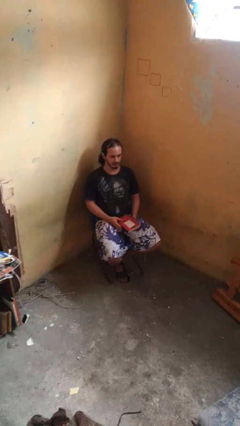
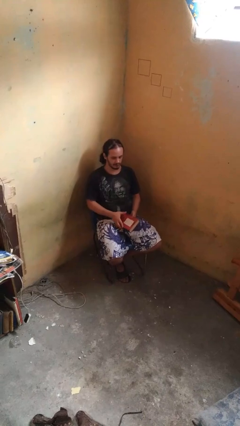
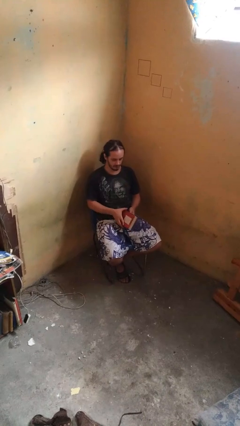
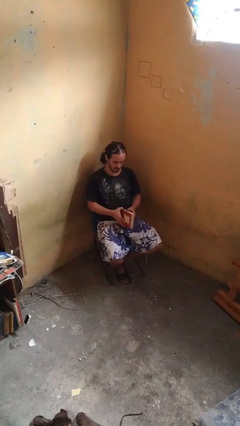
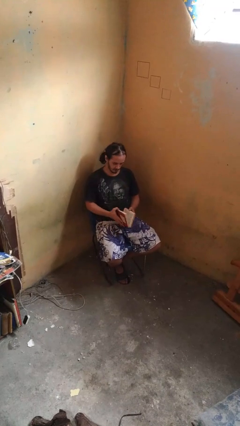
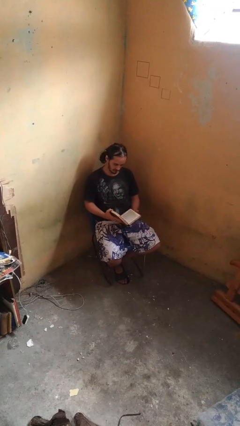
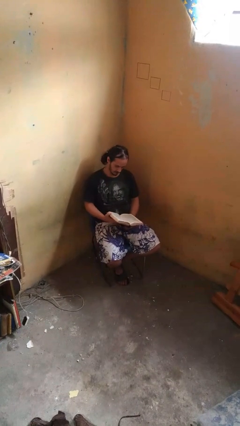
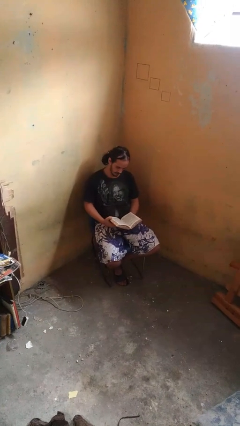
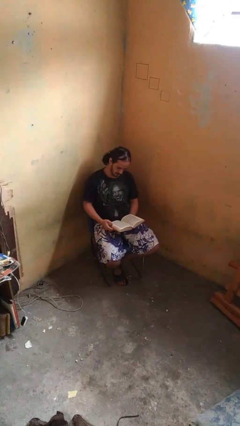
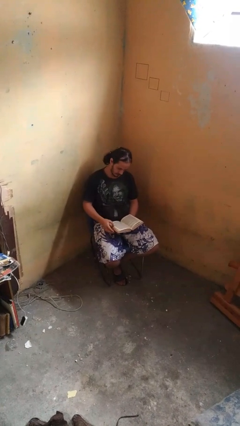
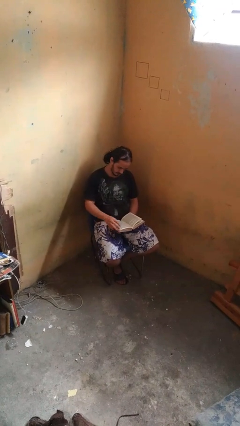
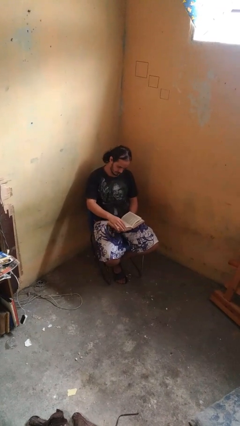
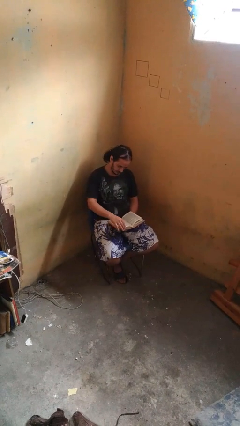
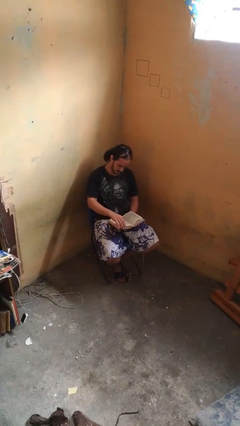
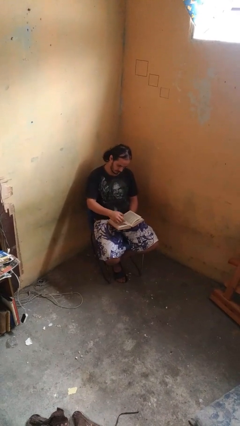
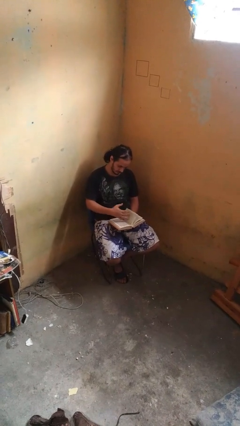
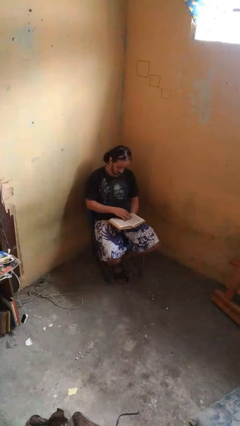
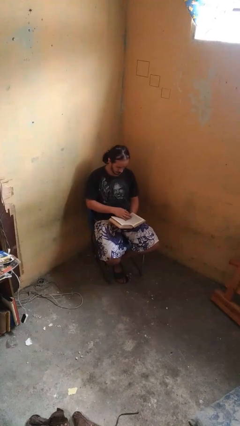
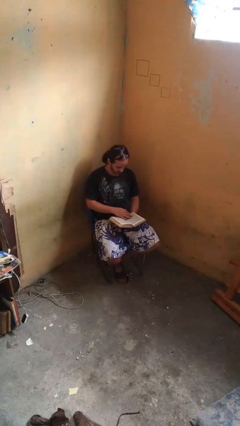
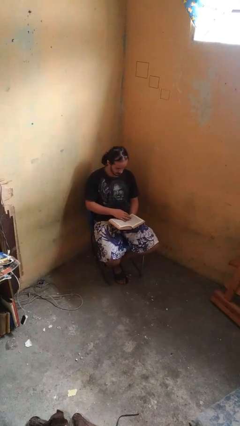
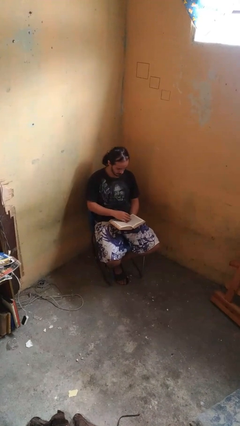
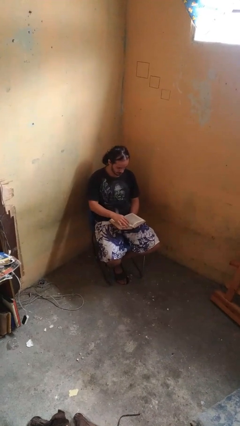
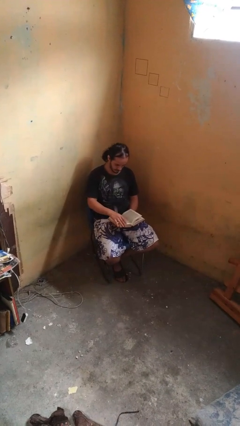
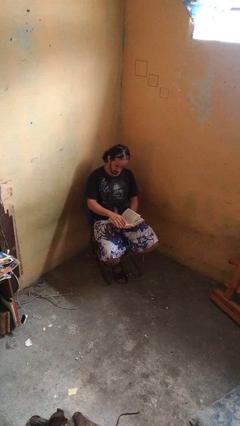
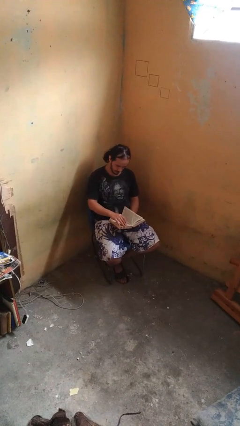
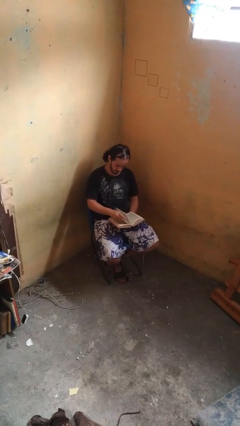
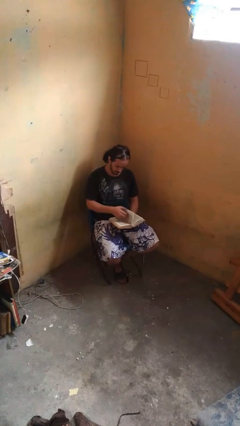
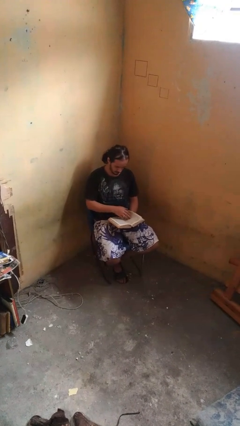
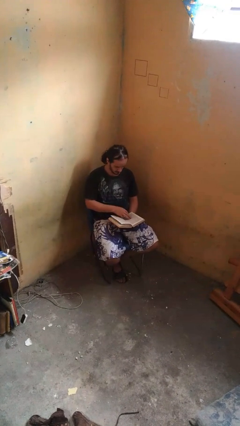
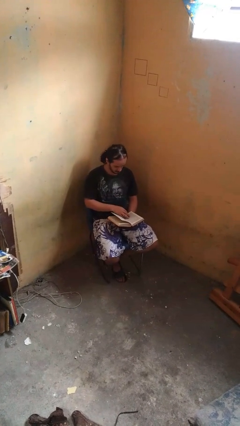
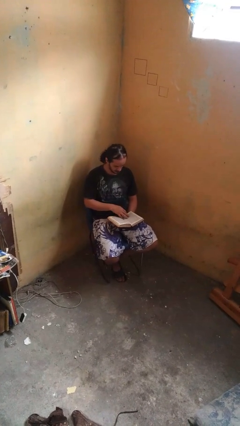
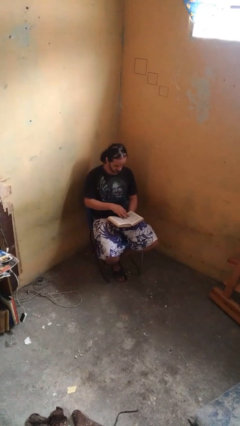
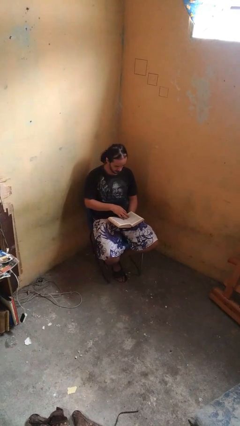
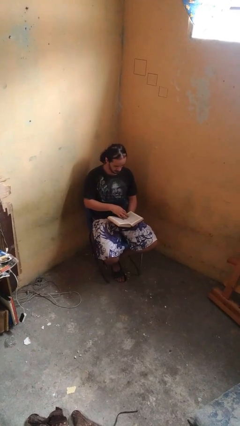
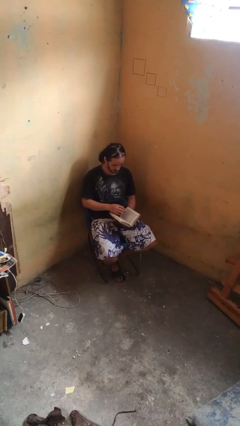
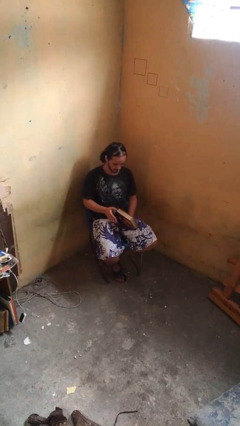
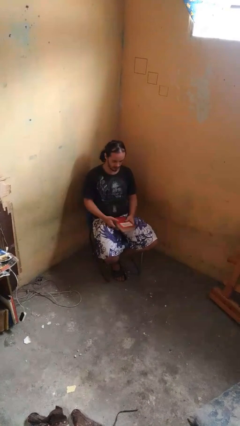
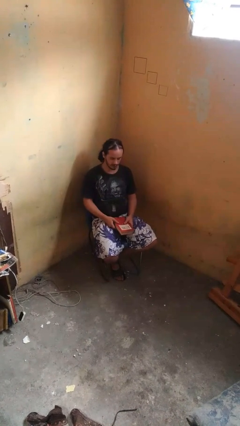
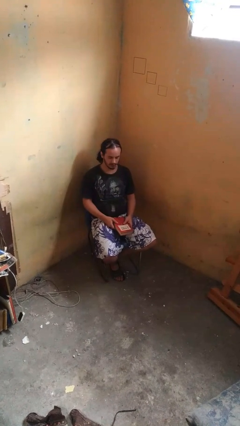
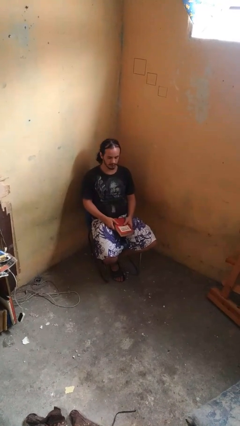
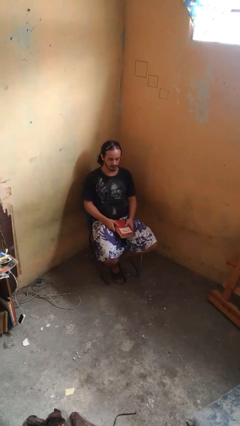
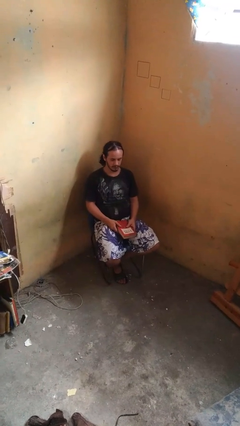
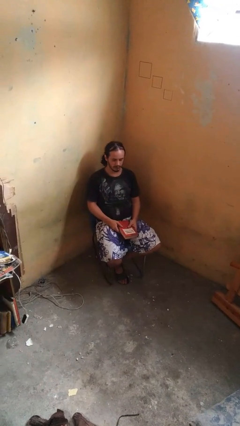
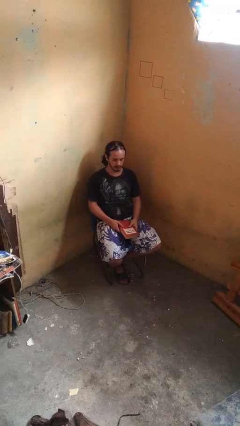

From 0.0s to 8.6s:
person reads book

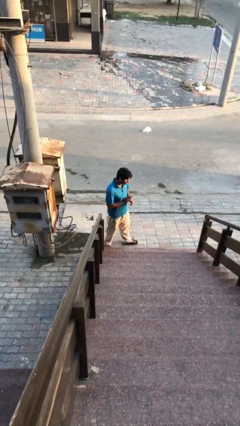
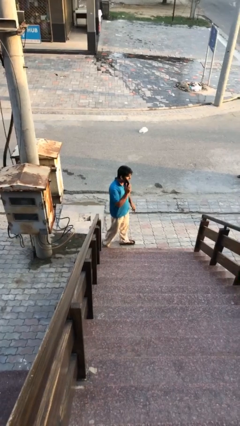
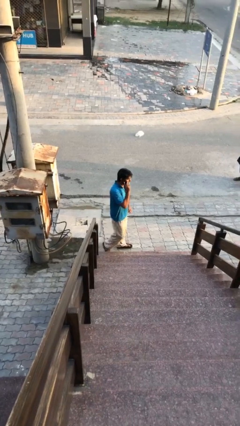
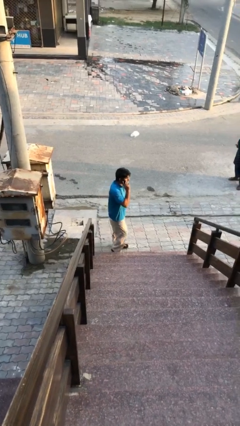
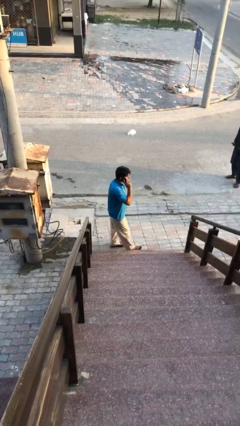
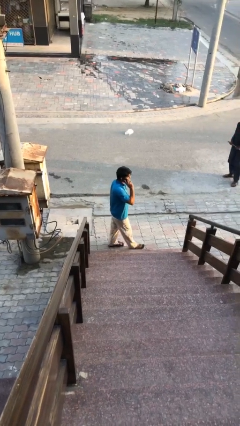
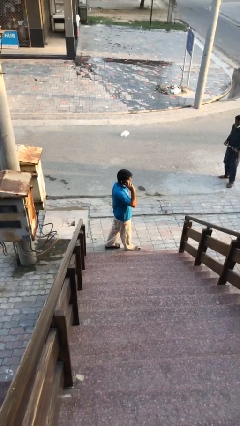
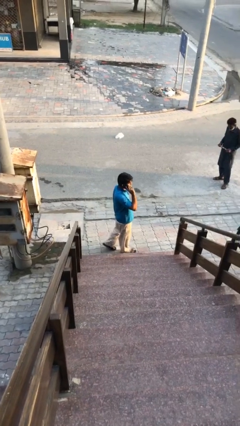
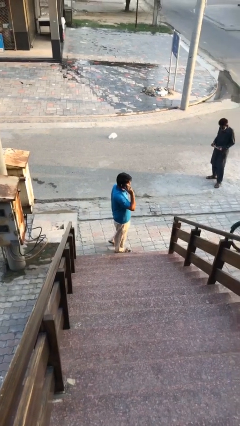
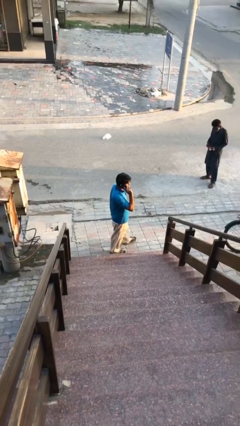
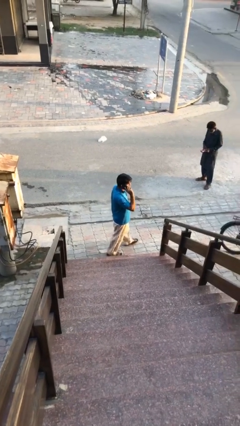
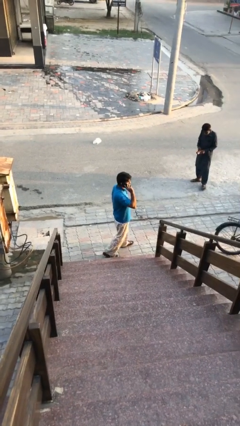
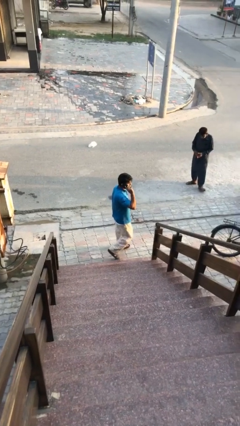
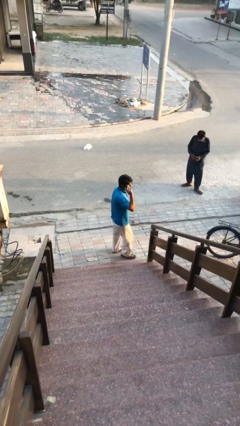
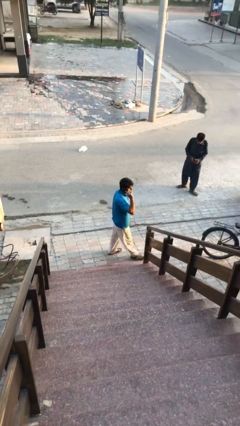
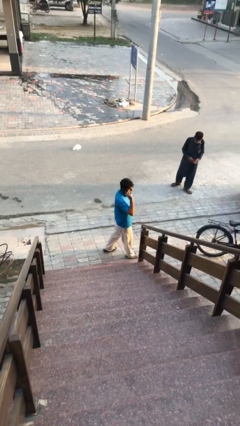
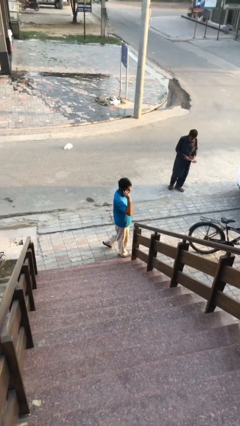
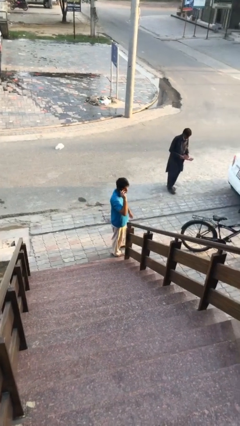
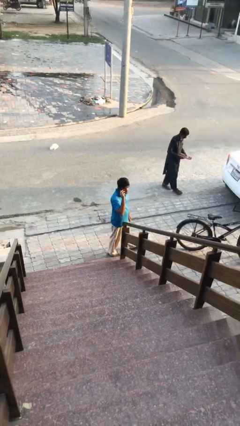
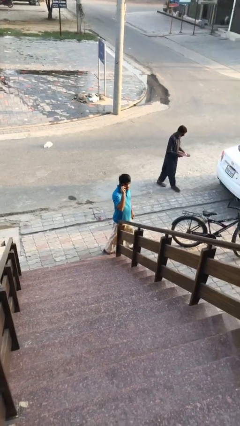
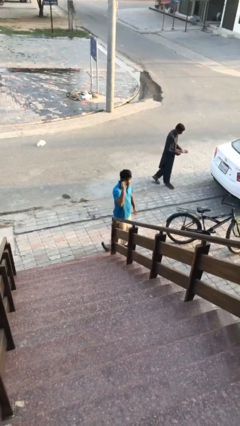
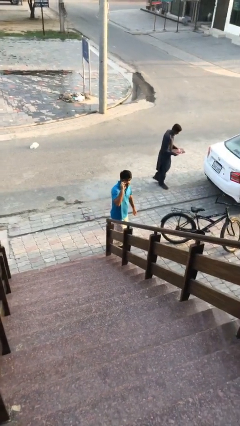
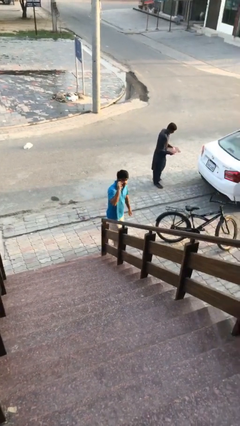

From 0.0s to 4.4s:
person talks on phone

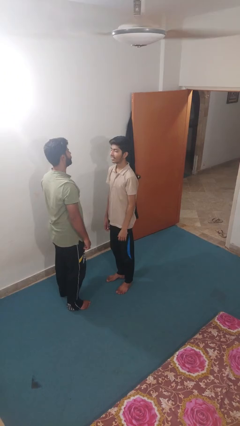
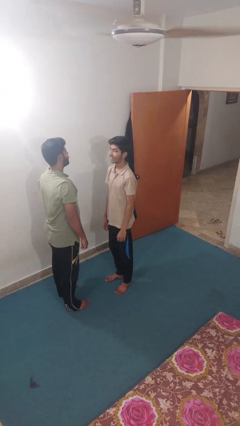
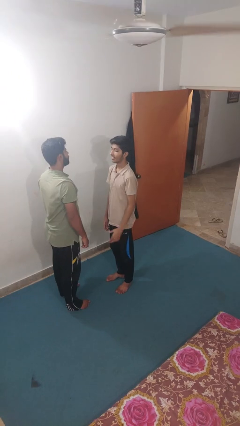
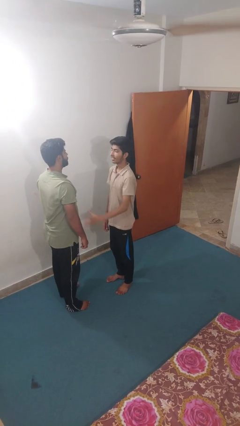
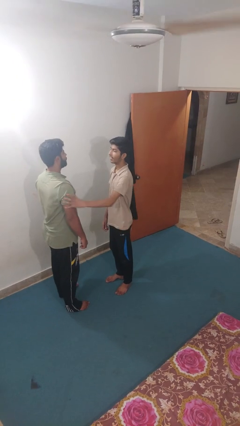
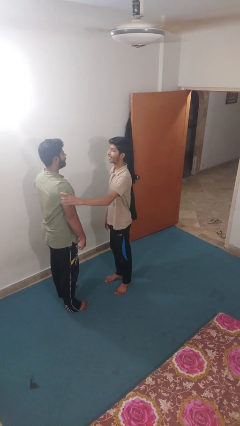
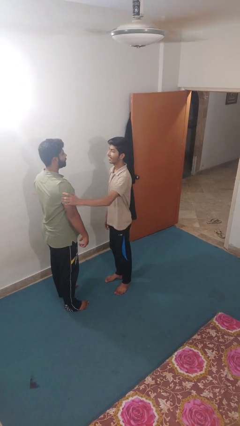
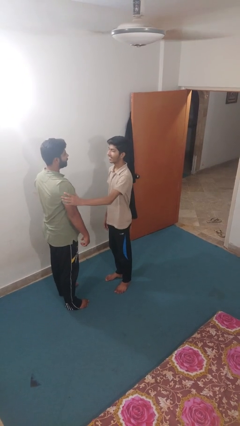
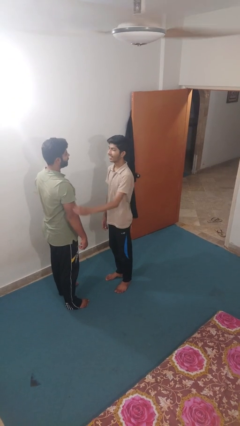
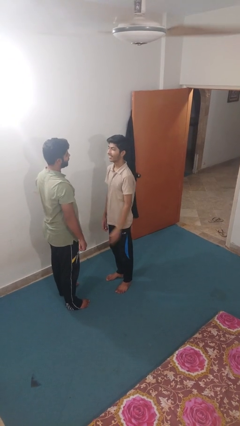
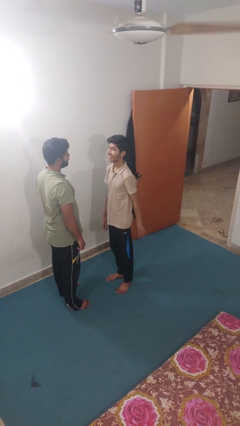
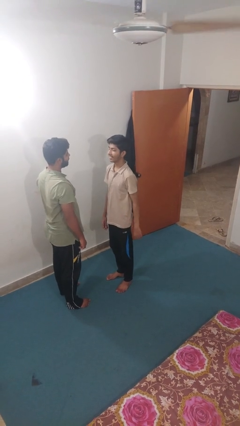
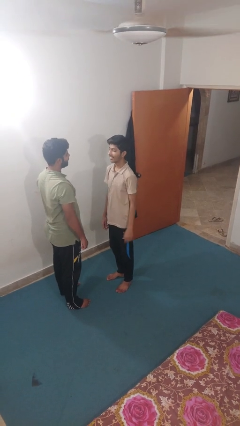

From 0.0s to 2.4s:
person grabs person by bicep

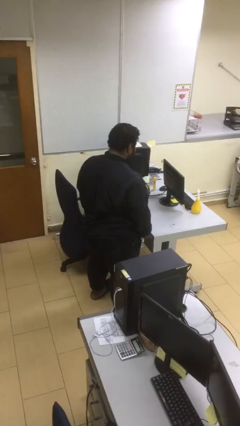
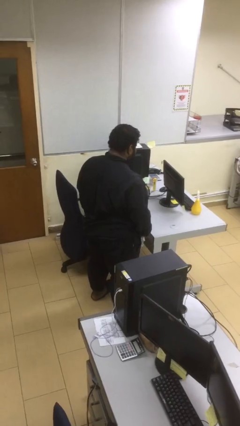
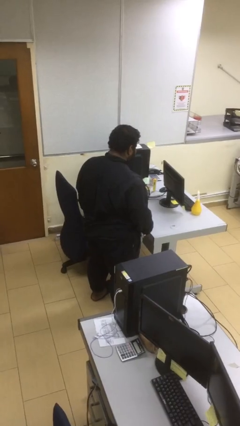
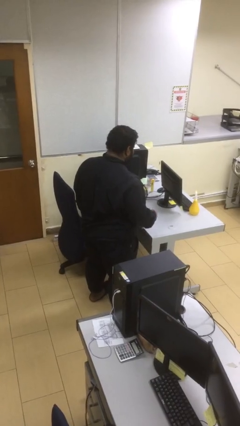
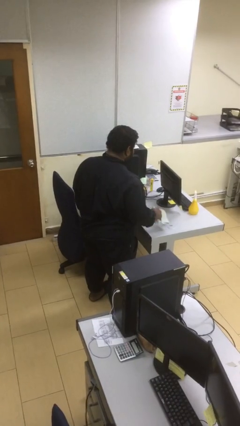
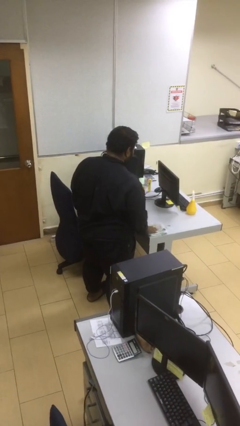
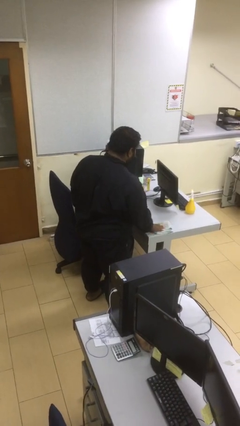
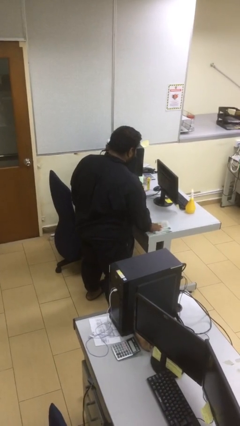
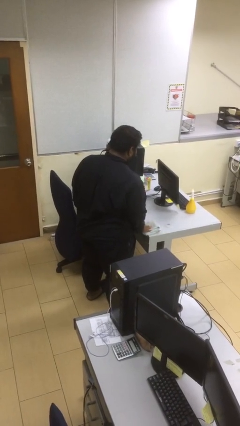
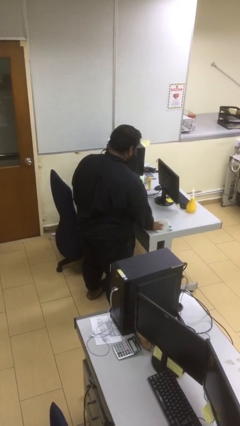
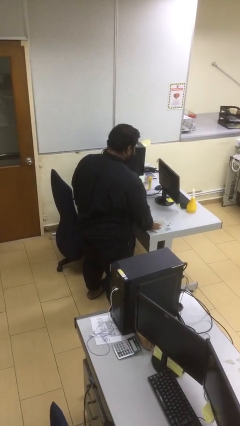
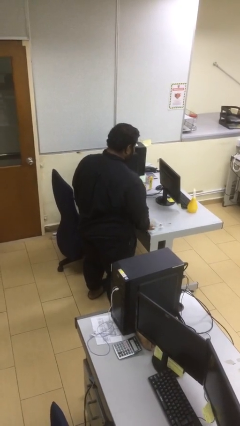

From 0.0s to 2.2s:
person cleans table with rag
